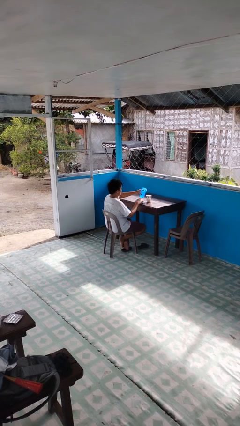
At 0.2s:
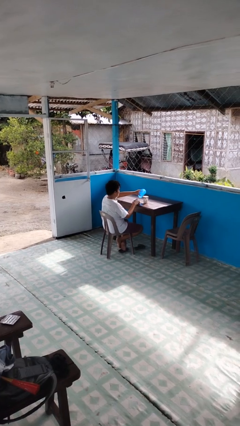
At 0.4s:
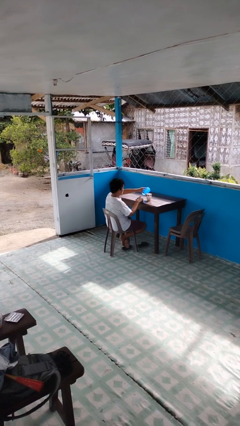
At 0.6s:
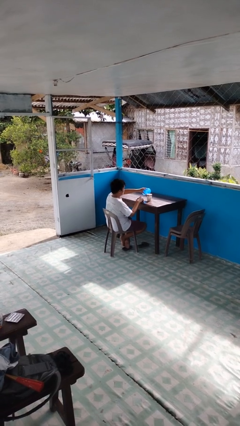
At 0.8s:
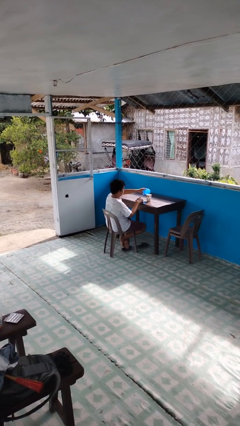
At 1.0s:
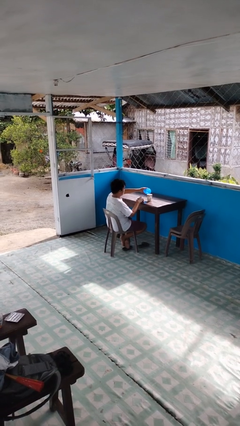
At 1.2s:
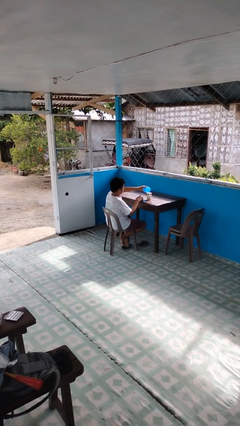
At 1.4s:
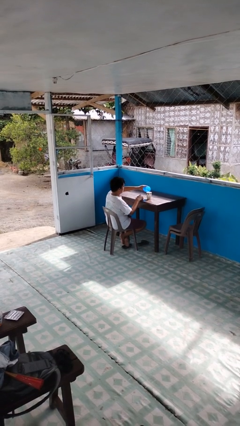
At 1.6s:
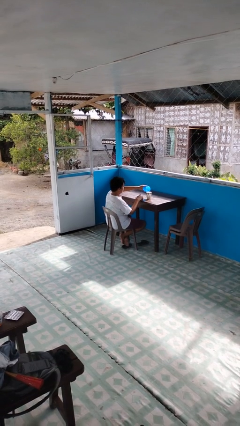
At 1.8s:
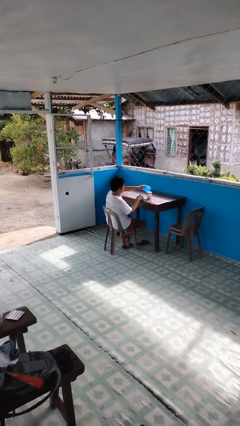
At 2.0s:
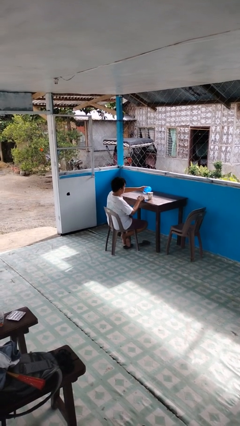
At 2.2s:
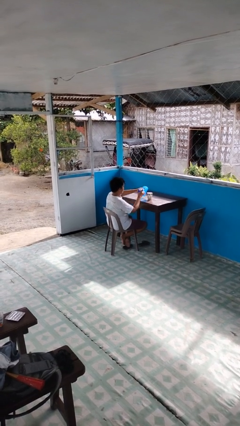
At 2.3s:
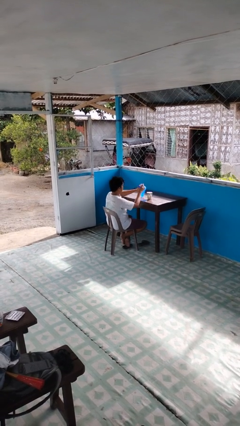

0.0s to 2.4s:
person pours liquid into cup

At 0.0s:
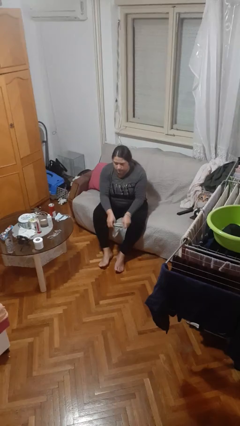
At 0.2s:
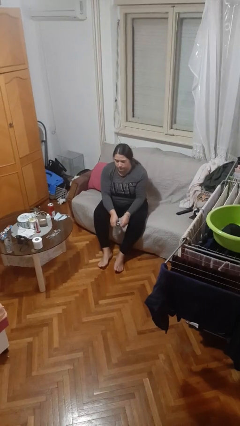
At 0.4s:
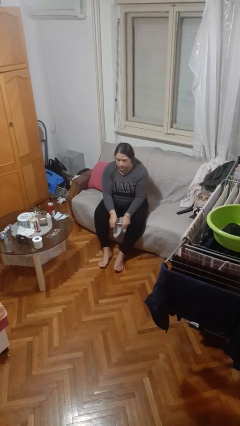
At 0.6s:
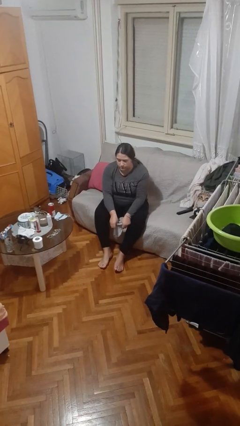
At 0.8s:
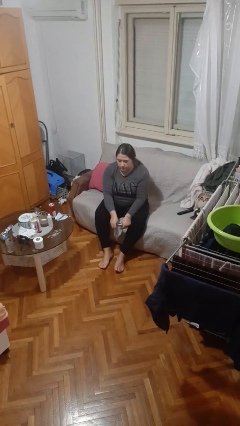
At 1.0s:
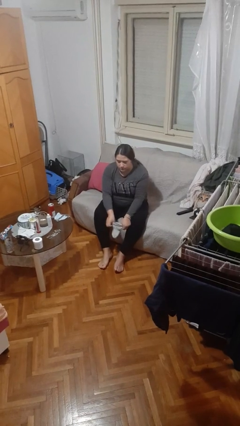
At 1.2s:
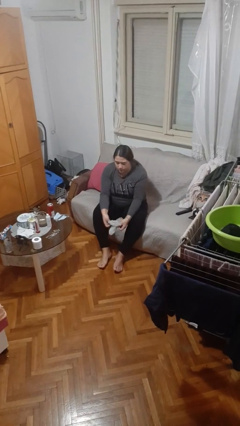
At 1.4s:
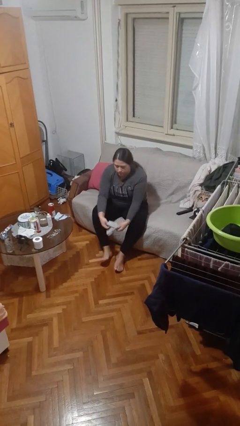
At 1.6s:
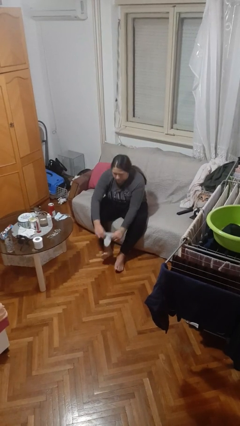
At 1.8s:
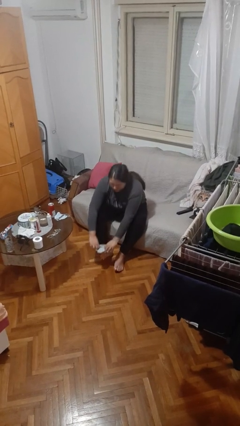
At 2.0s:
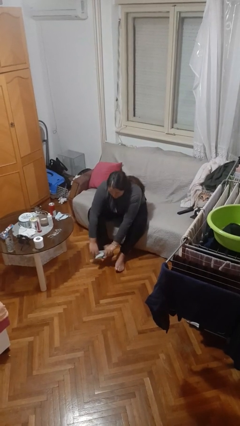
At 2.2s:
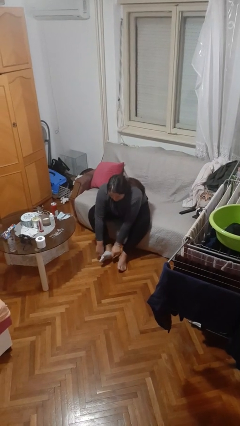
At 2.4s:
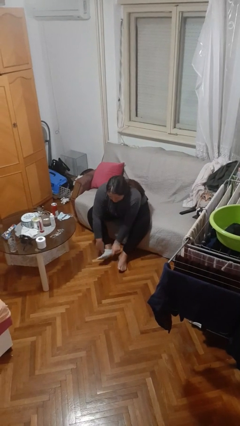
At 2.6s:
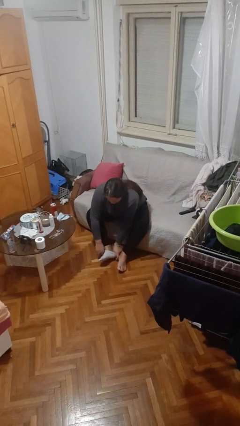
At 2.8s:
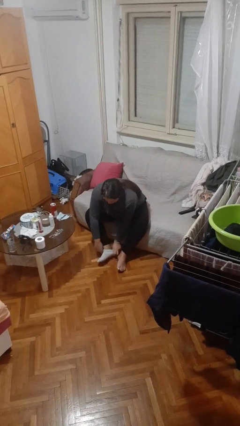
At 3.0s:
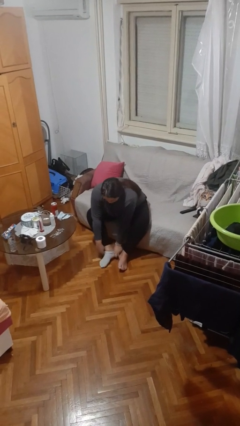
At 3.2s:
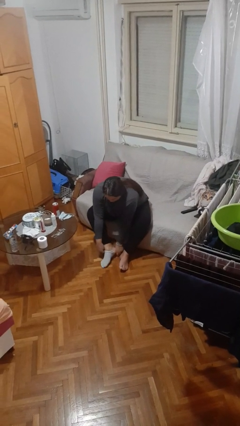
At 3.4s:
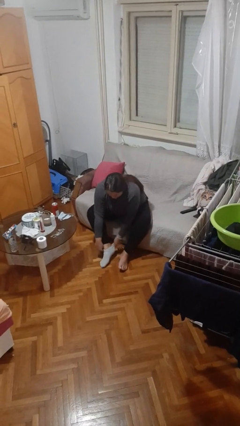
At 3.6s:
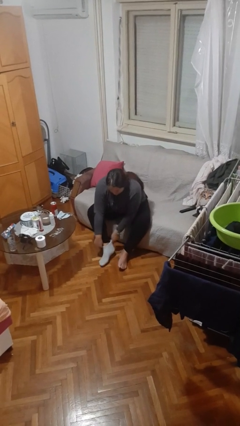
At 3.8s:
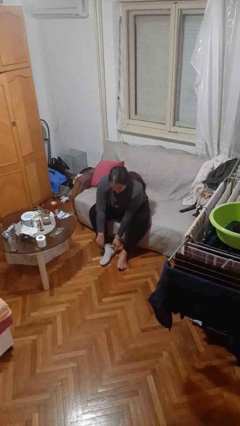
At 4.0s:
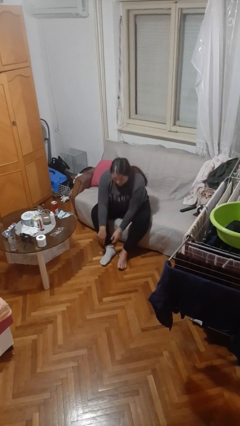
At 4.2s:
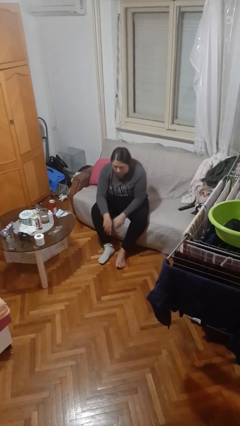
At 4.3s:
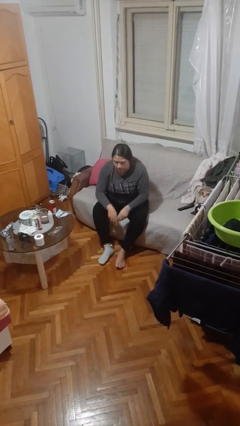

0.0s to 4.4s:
person puts on socks

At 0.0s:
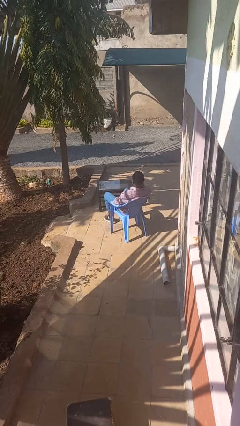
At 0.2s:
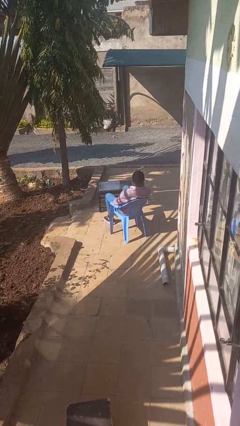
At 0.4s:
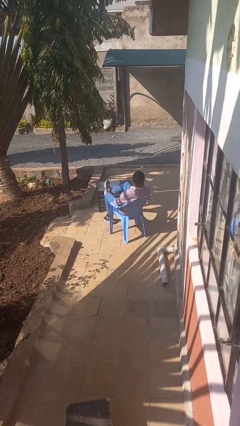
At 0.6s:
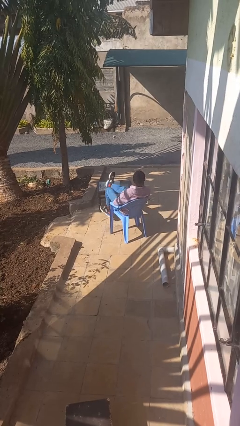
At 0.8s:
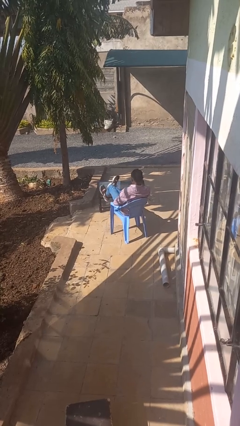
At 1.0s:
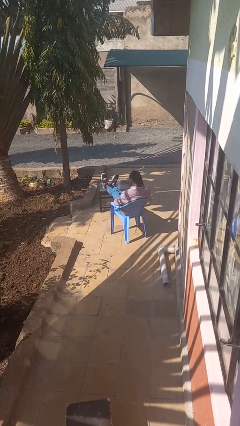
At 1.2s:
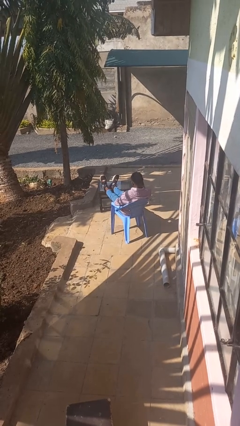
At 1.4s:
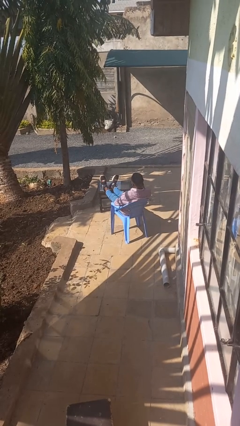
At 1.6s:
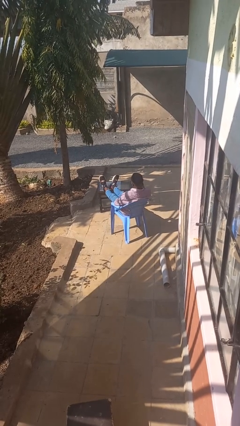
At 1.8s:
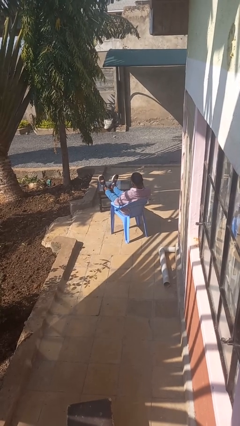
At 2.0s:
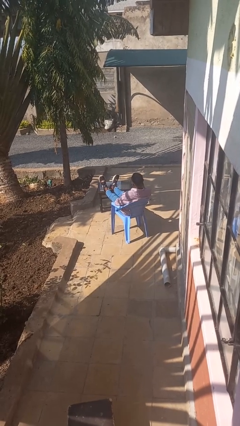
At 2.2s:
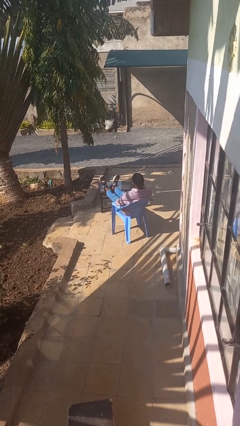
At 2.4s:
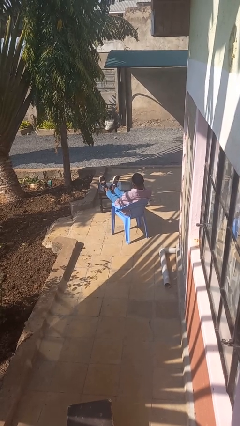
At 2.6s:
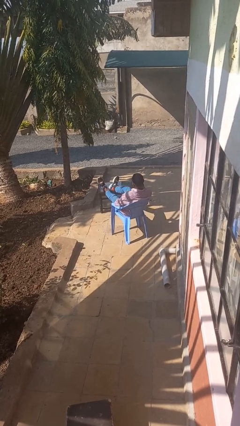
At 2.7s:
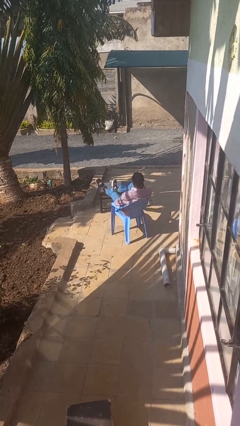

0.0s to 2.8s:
person puts feet up

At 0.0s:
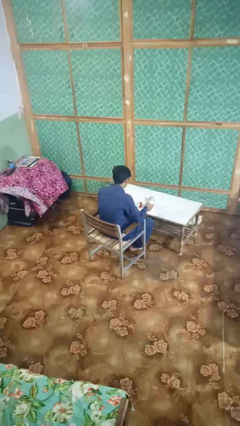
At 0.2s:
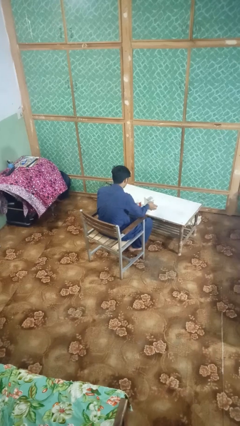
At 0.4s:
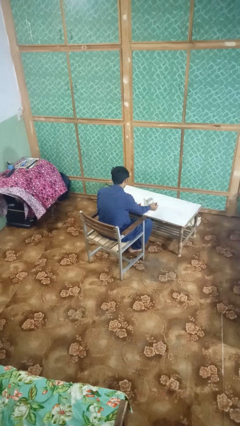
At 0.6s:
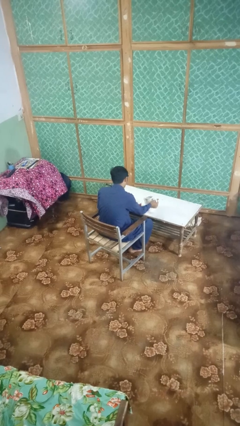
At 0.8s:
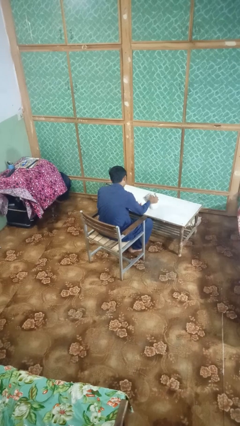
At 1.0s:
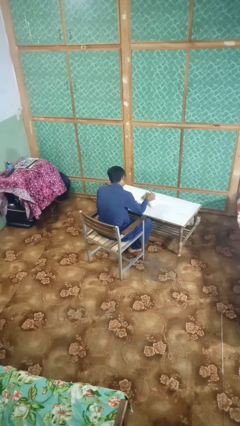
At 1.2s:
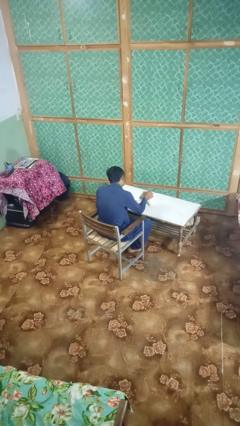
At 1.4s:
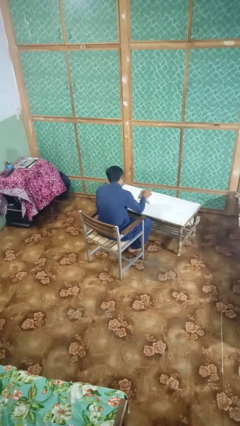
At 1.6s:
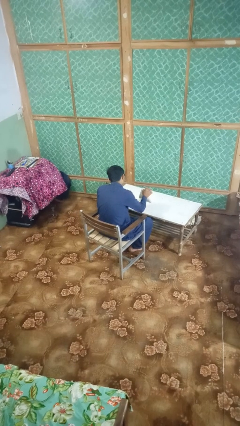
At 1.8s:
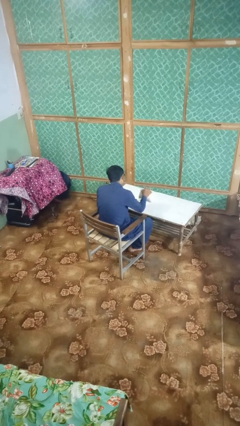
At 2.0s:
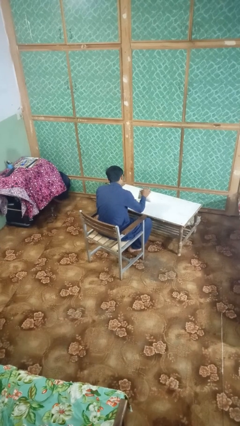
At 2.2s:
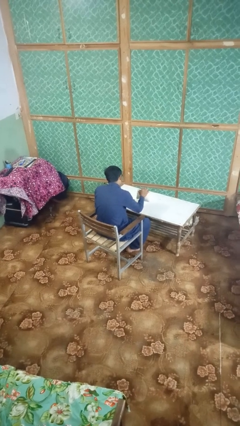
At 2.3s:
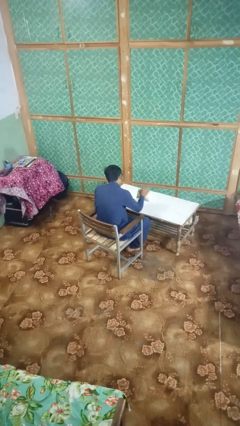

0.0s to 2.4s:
person pours coffee into mug

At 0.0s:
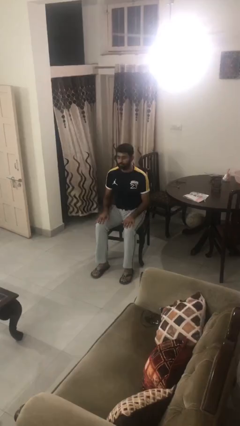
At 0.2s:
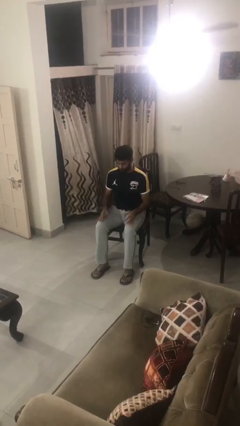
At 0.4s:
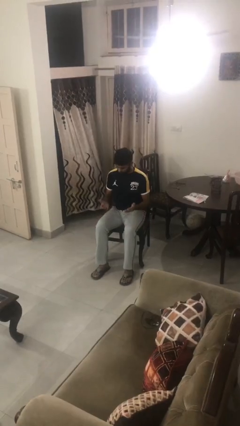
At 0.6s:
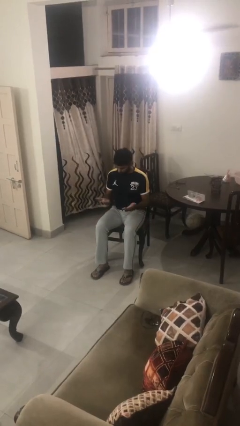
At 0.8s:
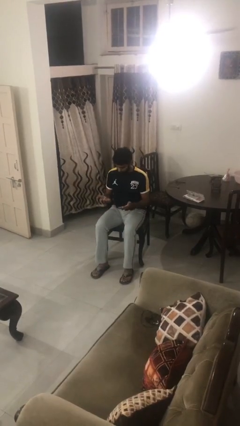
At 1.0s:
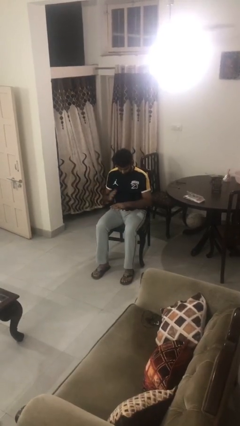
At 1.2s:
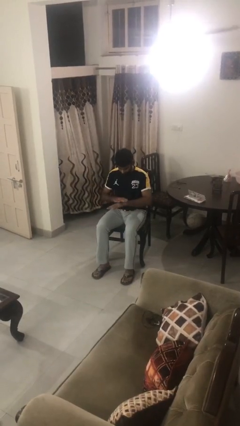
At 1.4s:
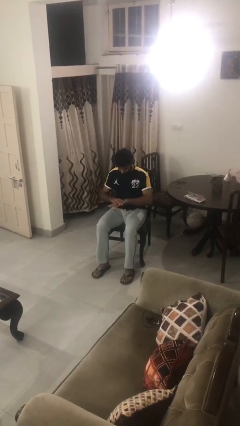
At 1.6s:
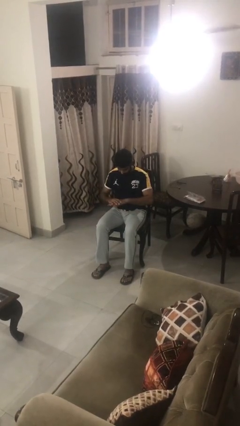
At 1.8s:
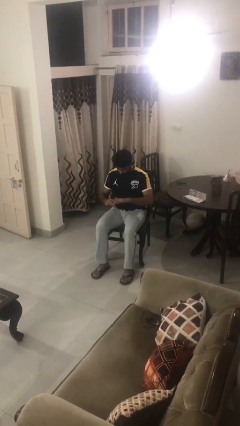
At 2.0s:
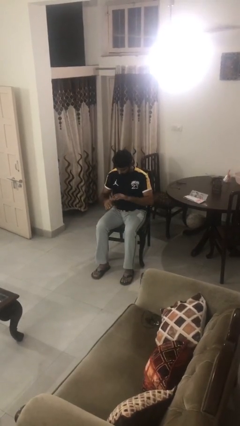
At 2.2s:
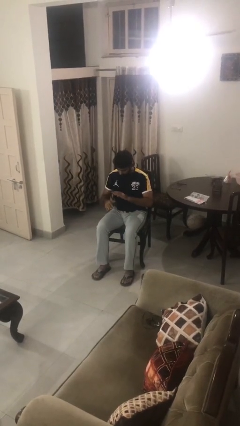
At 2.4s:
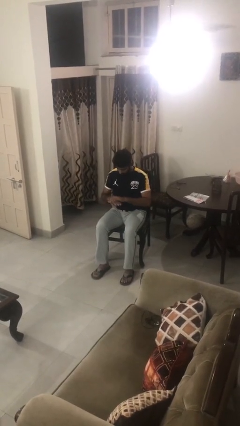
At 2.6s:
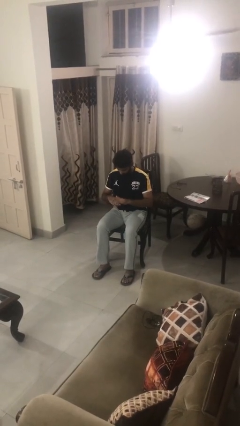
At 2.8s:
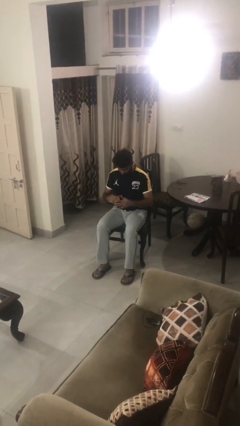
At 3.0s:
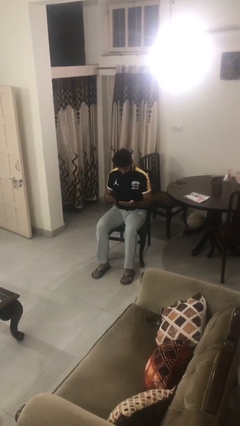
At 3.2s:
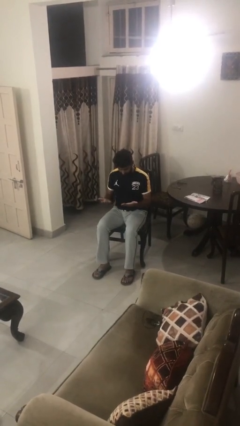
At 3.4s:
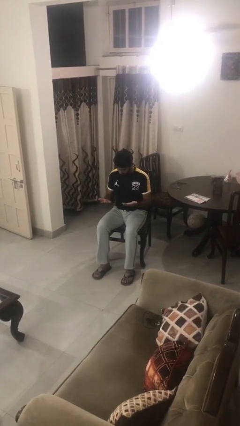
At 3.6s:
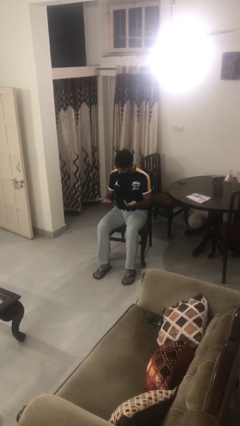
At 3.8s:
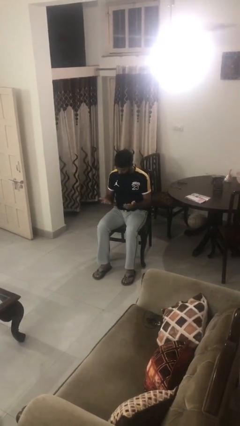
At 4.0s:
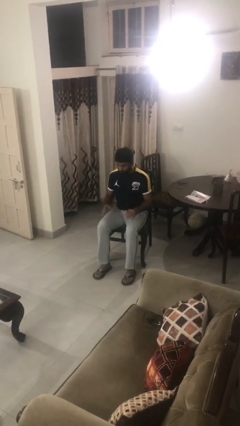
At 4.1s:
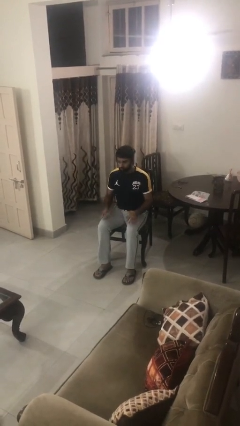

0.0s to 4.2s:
person looks at hands in lap

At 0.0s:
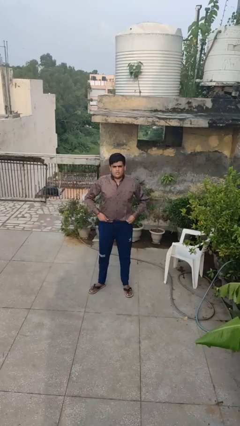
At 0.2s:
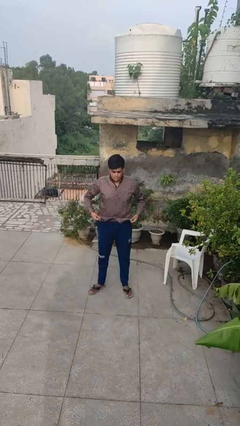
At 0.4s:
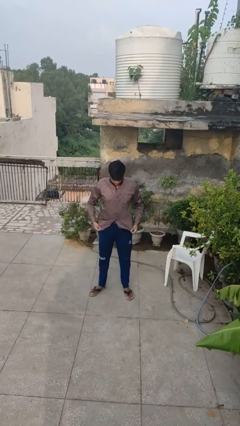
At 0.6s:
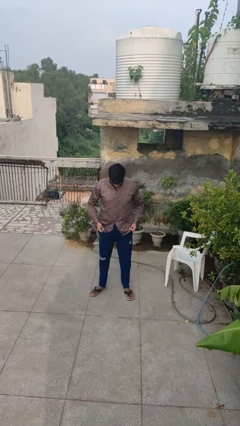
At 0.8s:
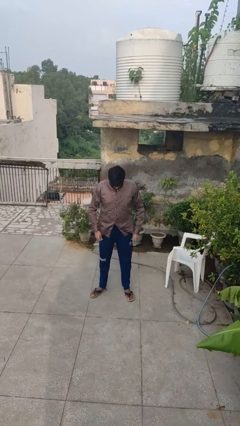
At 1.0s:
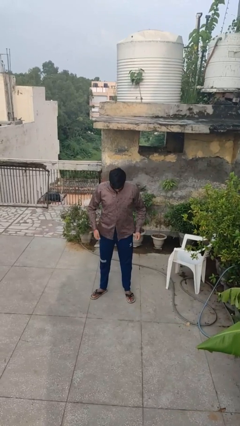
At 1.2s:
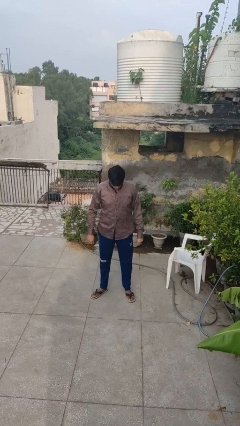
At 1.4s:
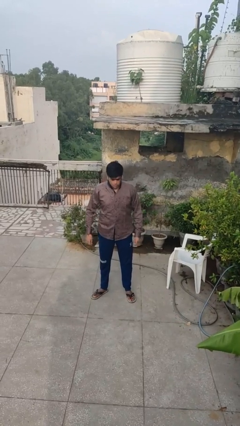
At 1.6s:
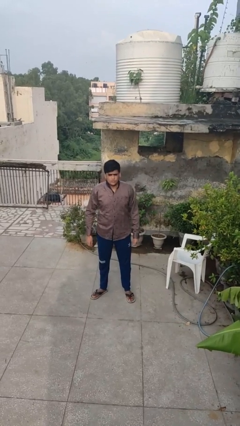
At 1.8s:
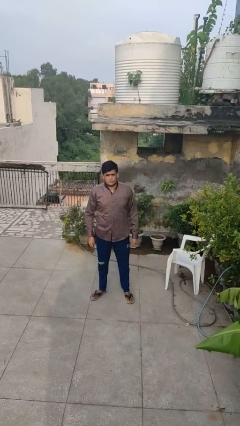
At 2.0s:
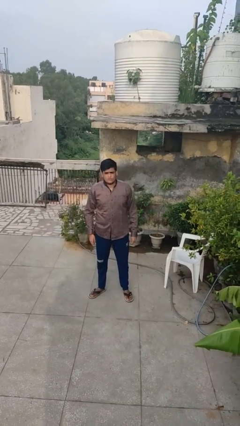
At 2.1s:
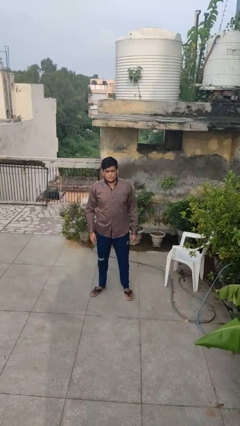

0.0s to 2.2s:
person untucks shirt
